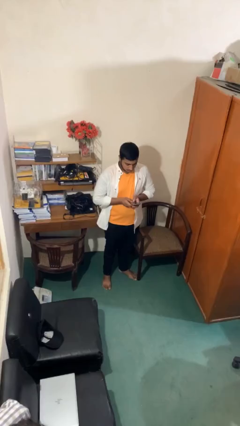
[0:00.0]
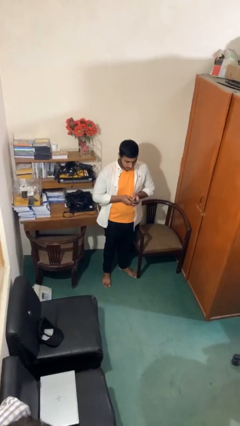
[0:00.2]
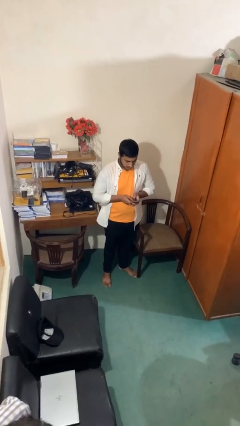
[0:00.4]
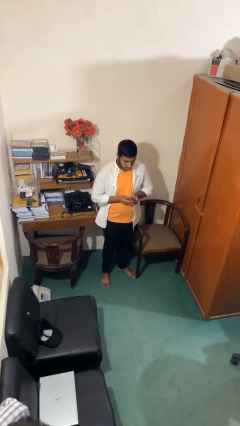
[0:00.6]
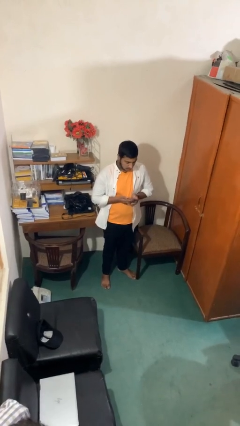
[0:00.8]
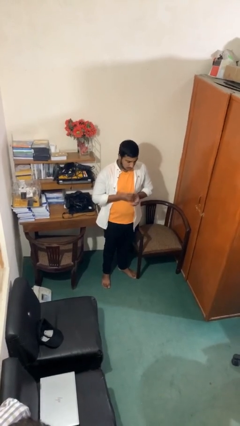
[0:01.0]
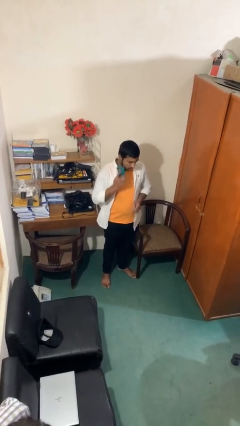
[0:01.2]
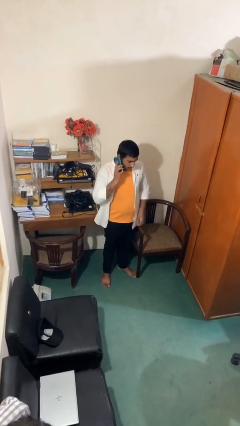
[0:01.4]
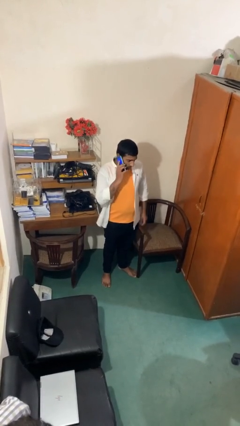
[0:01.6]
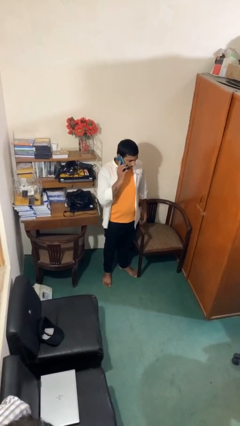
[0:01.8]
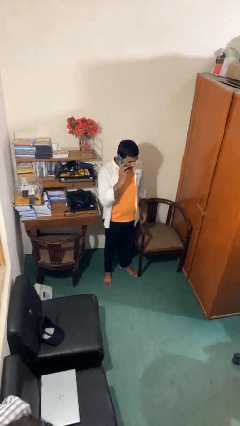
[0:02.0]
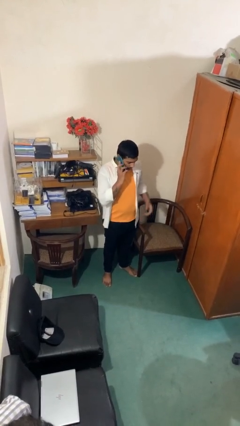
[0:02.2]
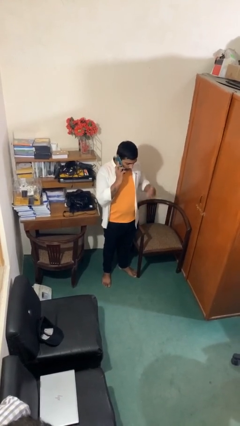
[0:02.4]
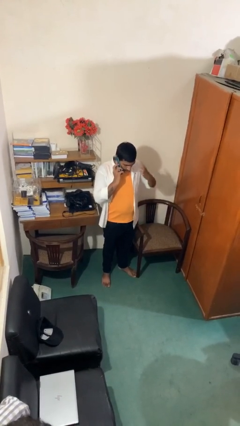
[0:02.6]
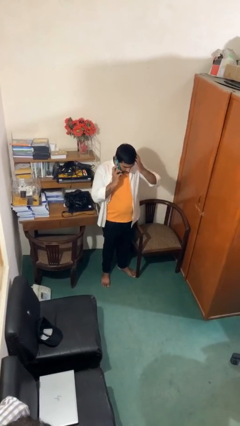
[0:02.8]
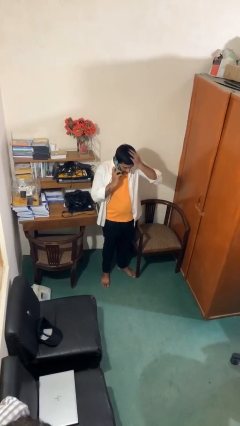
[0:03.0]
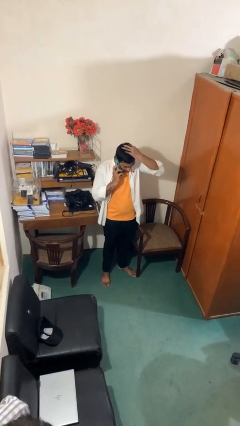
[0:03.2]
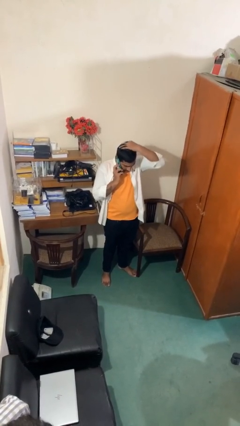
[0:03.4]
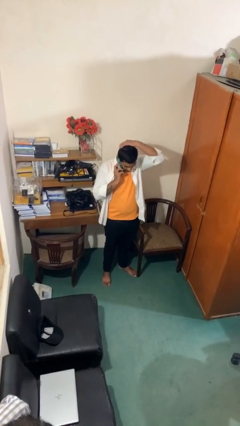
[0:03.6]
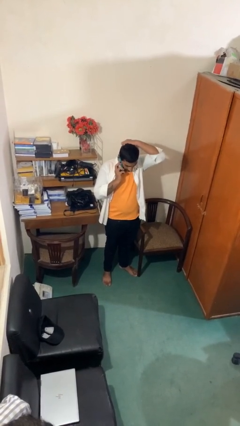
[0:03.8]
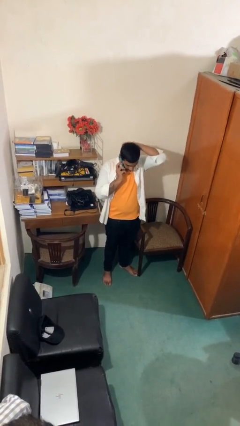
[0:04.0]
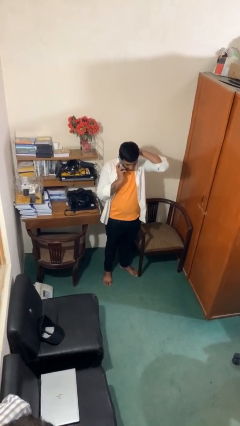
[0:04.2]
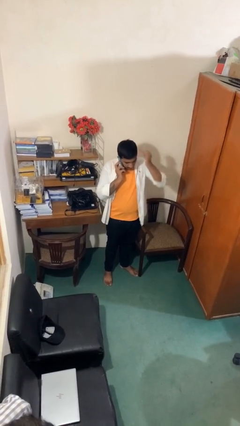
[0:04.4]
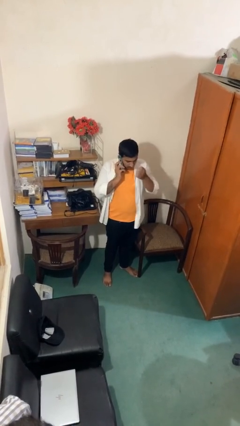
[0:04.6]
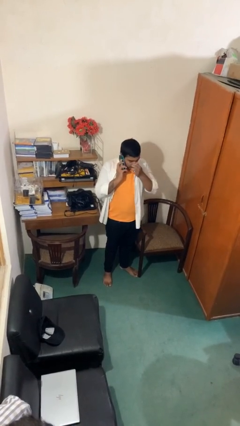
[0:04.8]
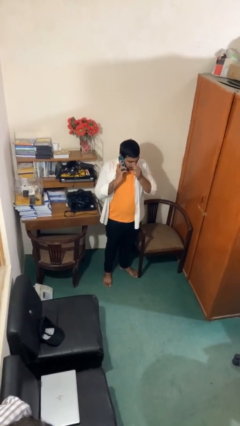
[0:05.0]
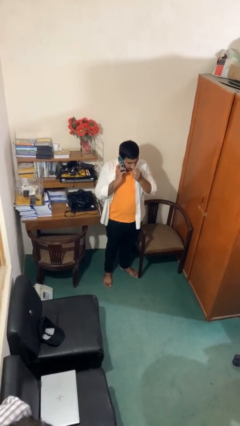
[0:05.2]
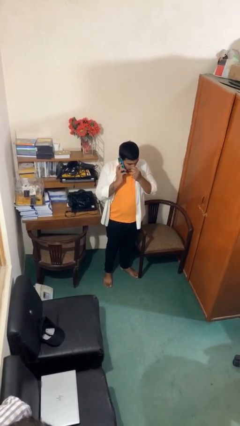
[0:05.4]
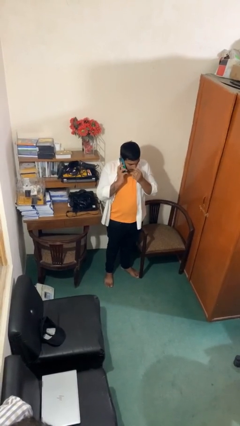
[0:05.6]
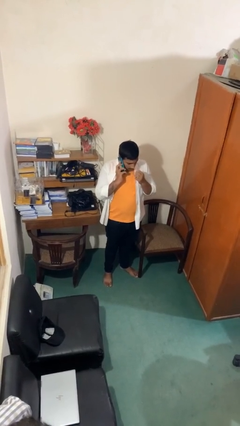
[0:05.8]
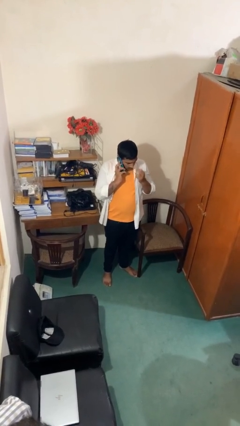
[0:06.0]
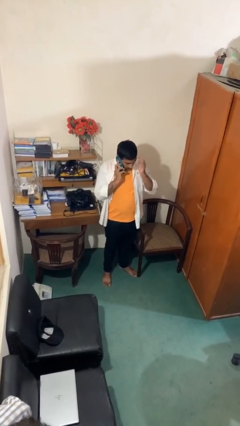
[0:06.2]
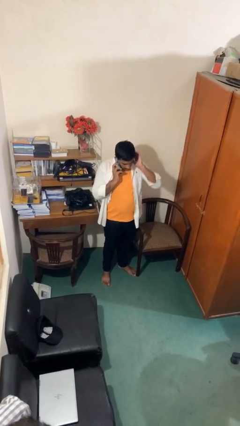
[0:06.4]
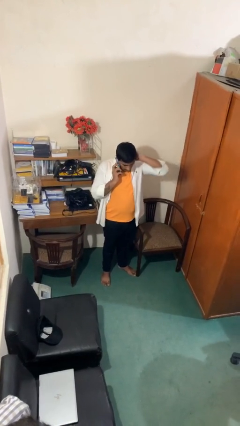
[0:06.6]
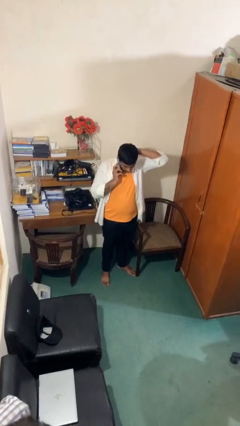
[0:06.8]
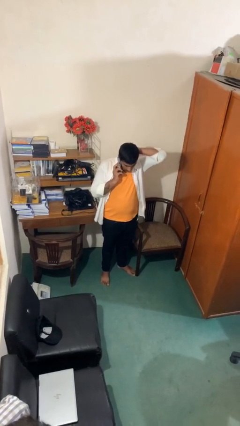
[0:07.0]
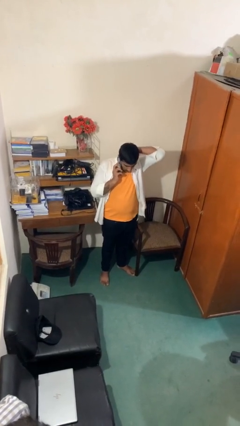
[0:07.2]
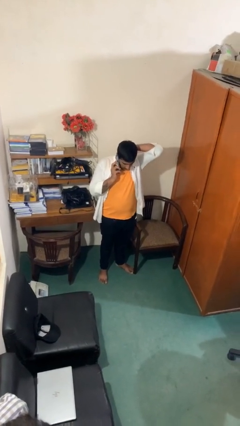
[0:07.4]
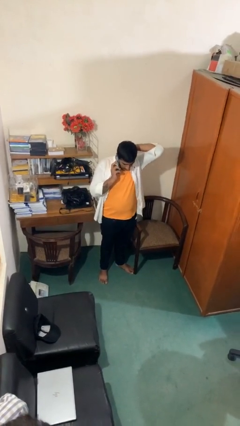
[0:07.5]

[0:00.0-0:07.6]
person talks on phone

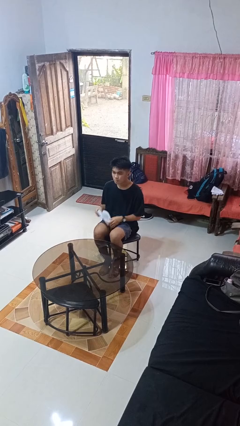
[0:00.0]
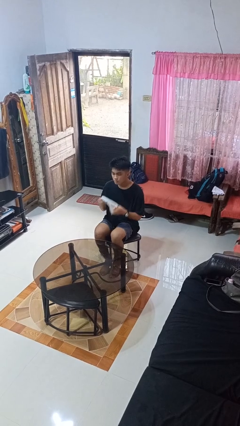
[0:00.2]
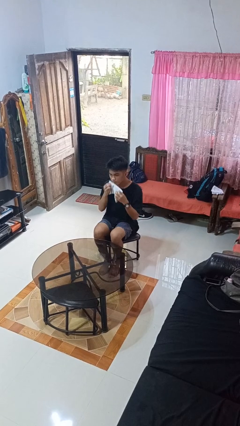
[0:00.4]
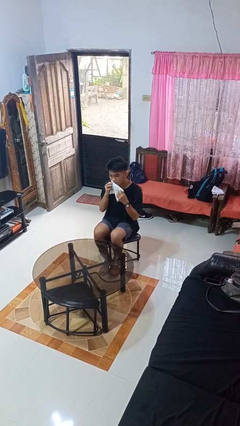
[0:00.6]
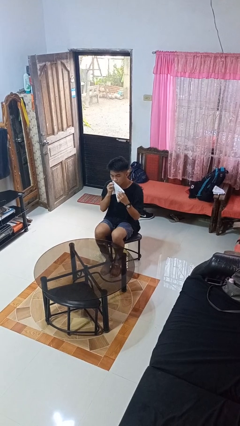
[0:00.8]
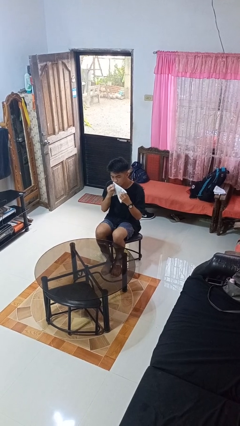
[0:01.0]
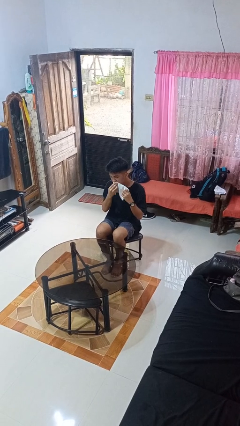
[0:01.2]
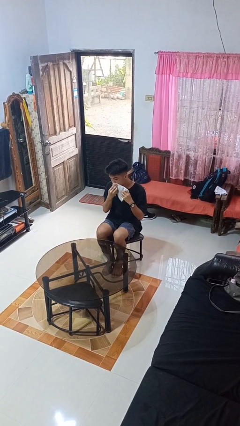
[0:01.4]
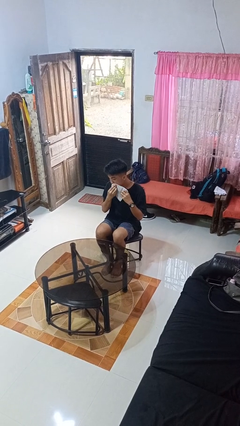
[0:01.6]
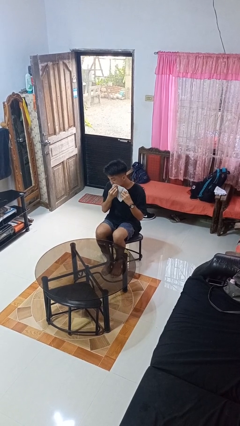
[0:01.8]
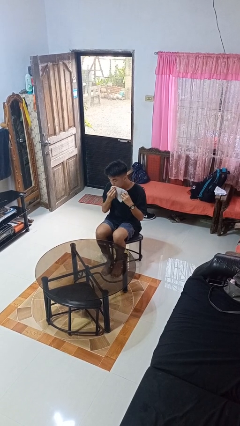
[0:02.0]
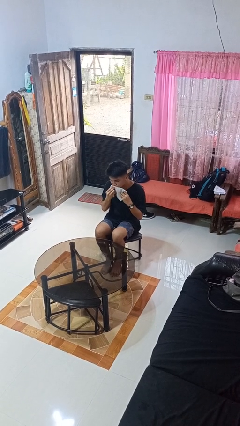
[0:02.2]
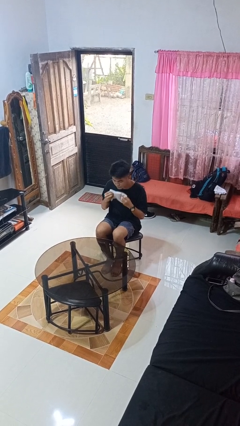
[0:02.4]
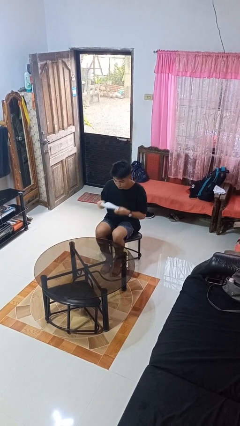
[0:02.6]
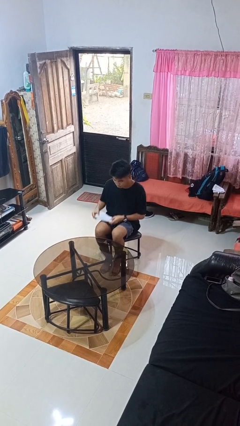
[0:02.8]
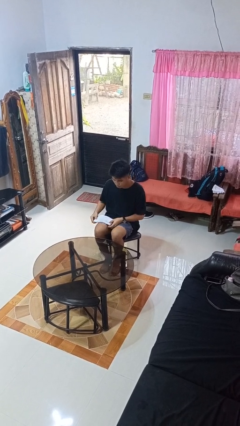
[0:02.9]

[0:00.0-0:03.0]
person wipes mouth with napkin

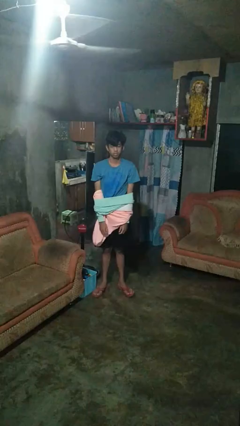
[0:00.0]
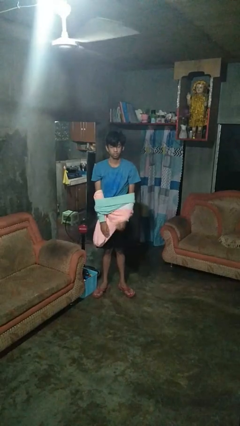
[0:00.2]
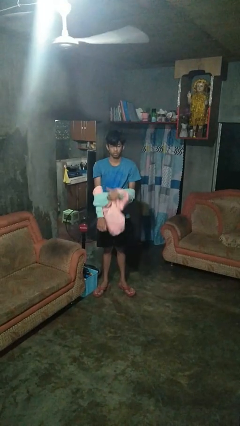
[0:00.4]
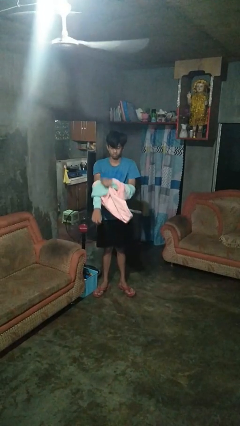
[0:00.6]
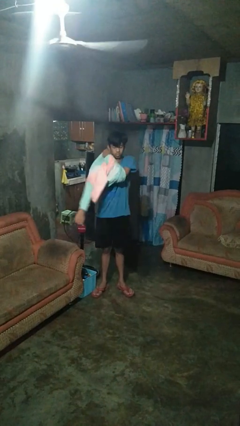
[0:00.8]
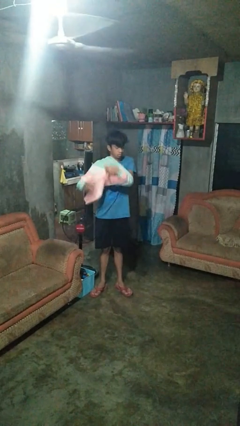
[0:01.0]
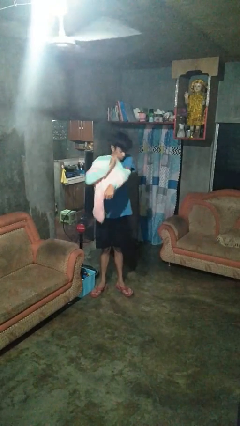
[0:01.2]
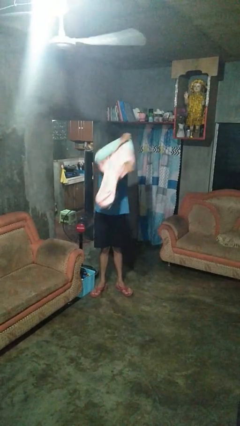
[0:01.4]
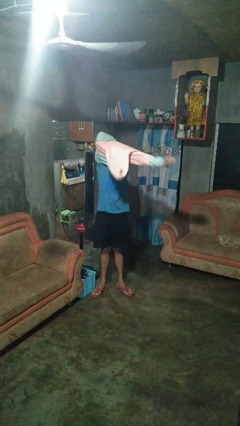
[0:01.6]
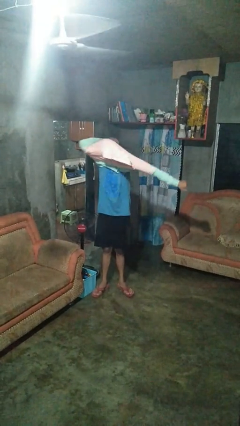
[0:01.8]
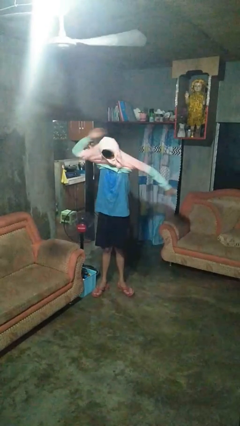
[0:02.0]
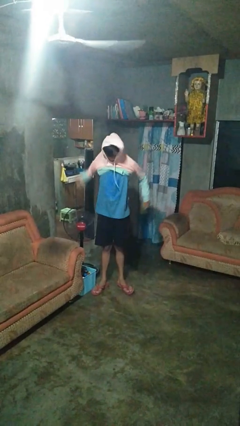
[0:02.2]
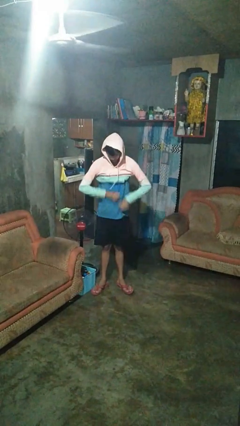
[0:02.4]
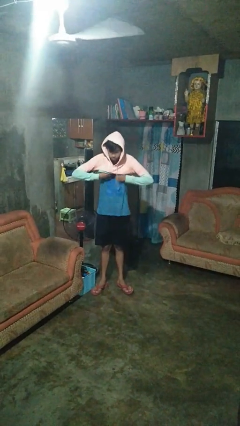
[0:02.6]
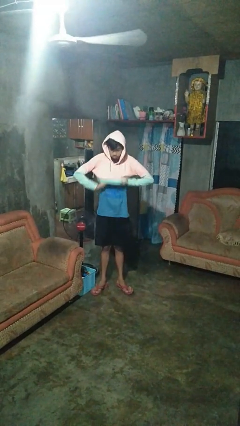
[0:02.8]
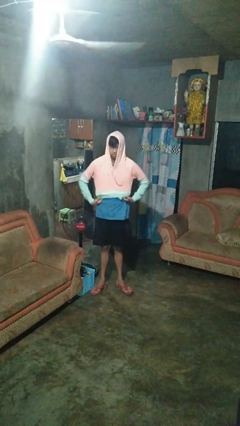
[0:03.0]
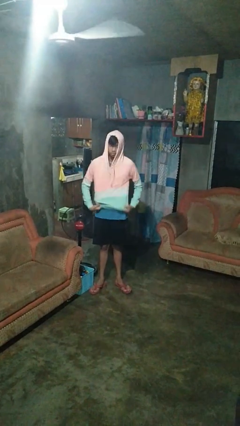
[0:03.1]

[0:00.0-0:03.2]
person puts on hoodie

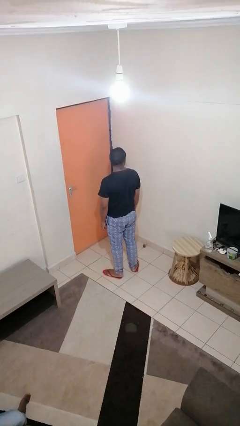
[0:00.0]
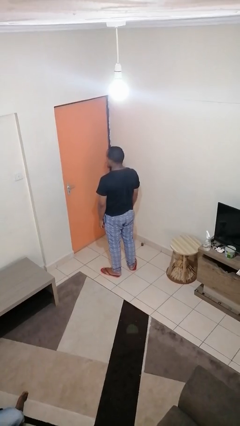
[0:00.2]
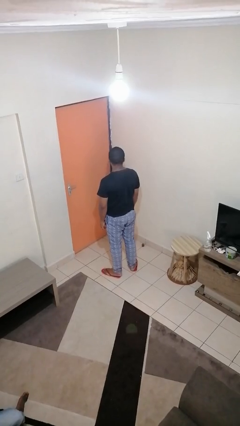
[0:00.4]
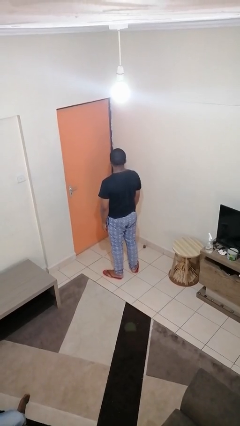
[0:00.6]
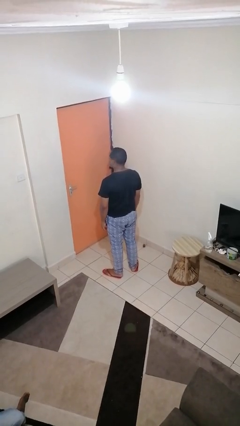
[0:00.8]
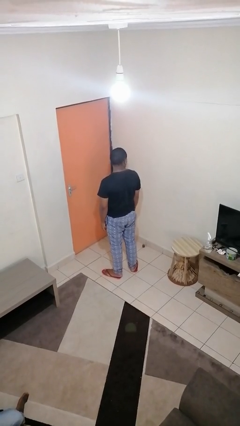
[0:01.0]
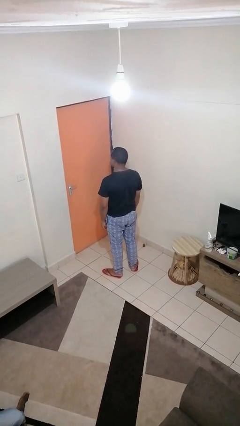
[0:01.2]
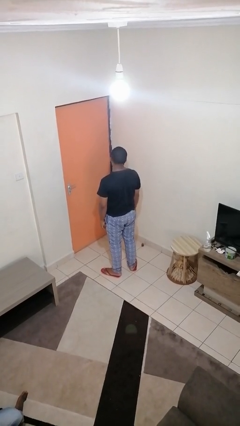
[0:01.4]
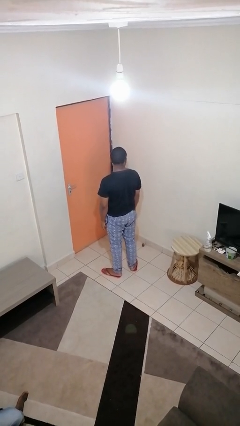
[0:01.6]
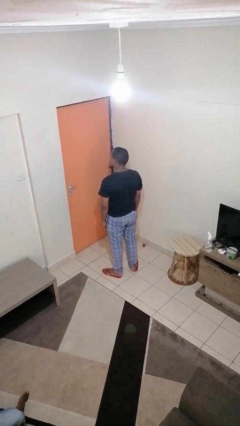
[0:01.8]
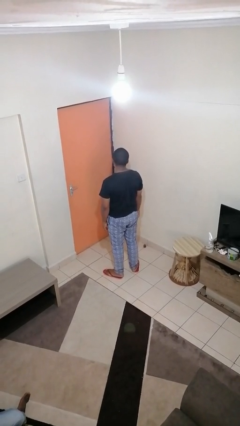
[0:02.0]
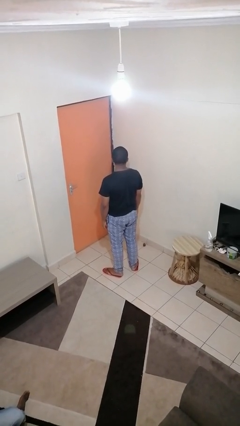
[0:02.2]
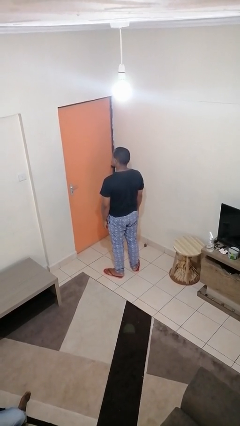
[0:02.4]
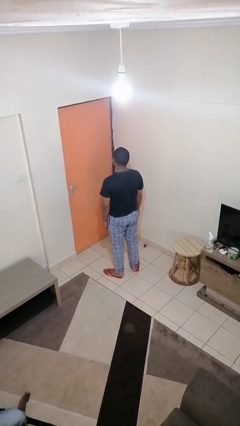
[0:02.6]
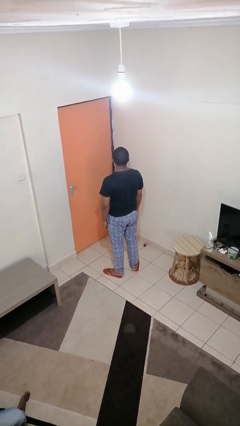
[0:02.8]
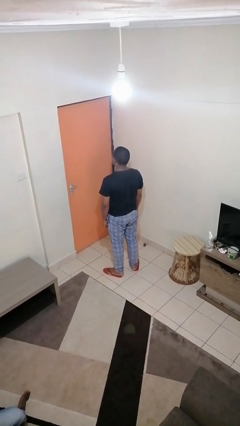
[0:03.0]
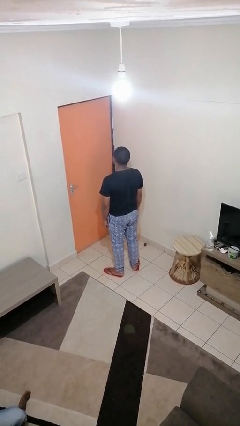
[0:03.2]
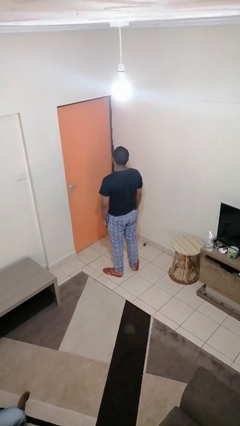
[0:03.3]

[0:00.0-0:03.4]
person shakes head

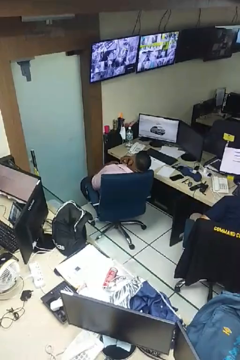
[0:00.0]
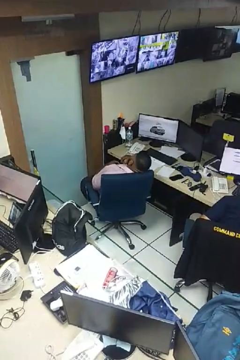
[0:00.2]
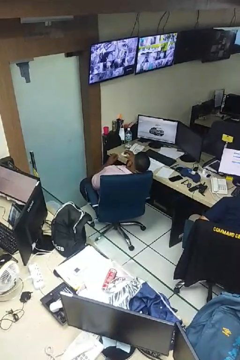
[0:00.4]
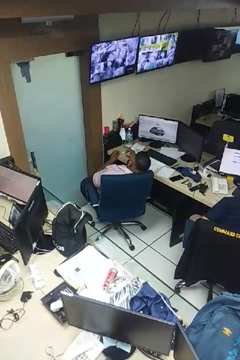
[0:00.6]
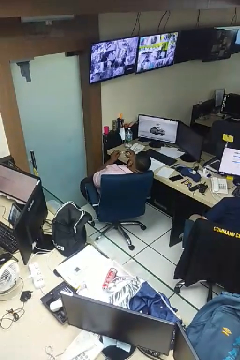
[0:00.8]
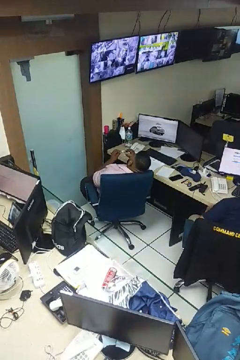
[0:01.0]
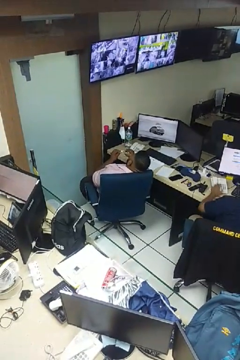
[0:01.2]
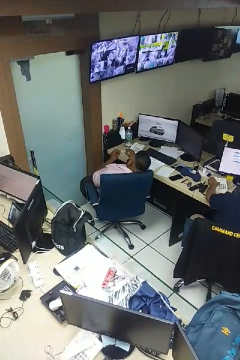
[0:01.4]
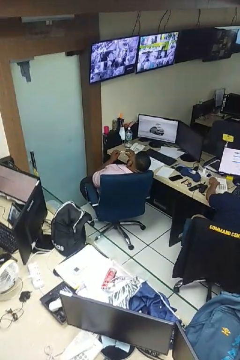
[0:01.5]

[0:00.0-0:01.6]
person clips fingernails
